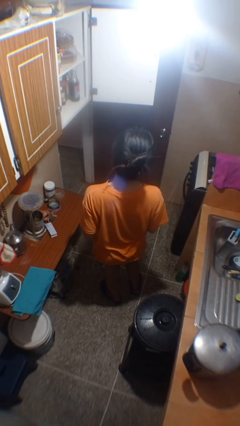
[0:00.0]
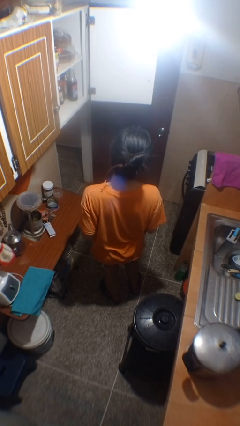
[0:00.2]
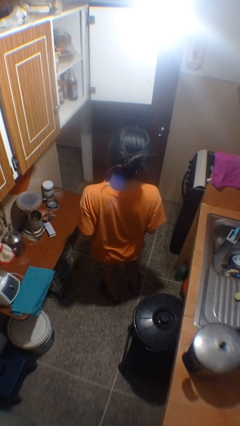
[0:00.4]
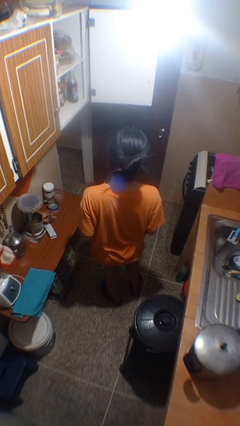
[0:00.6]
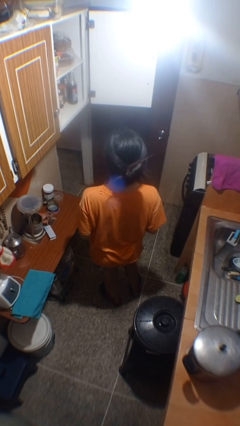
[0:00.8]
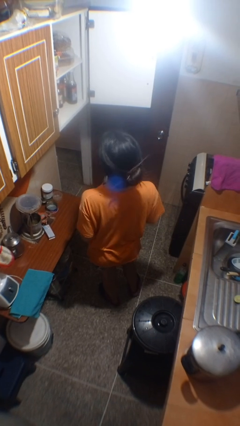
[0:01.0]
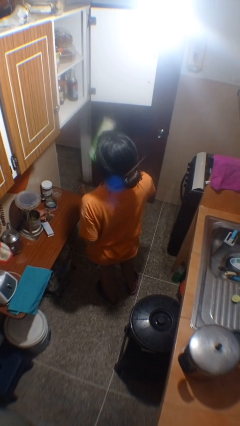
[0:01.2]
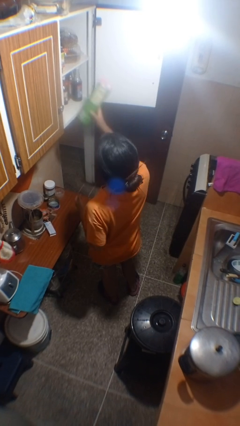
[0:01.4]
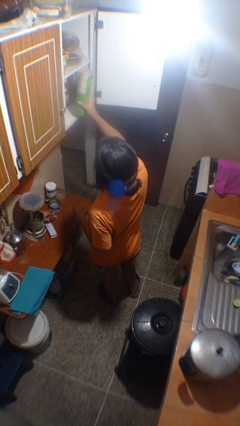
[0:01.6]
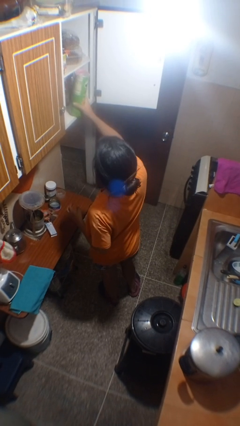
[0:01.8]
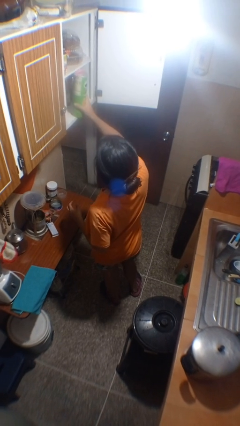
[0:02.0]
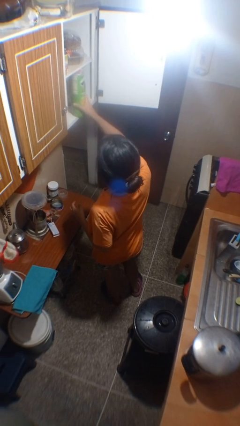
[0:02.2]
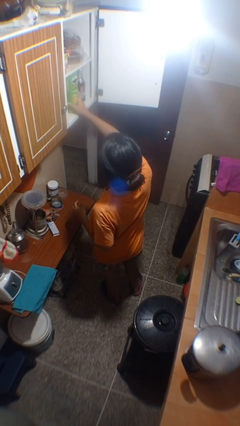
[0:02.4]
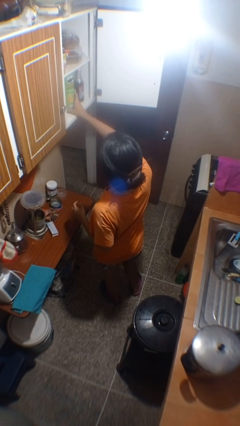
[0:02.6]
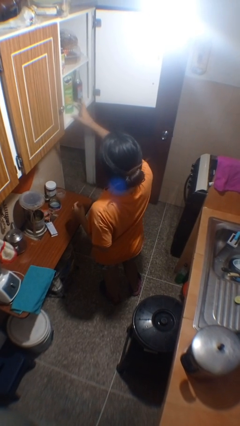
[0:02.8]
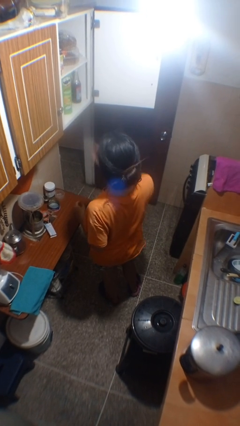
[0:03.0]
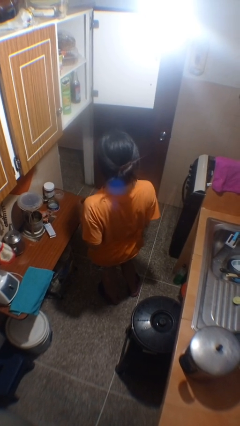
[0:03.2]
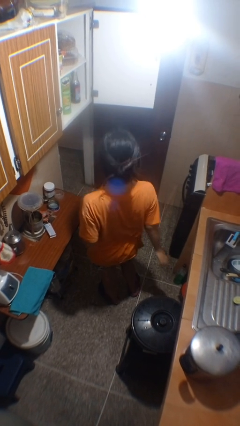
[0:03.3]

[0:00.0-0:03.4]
person puts object in cabinet

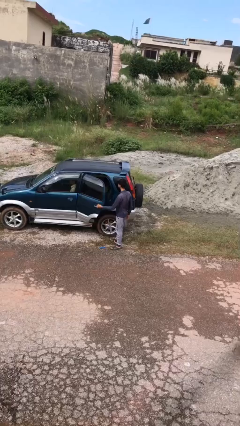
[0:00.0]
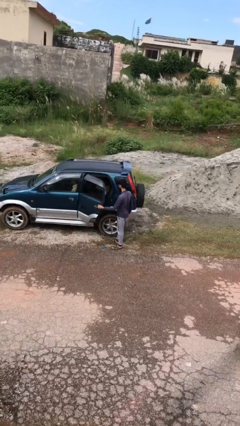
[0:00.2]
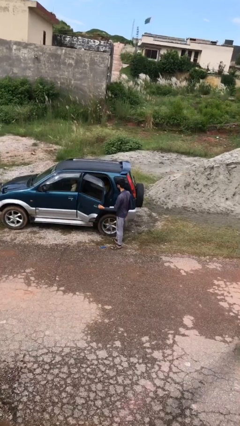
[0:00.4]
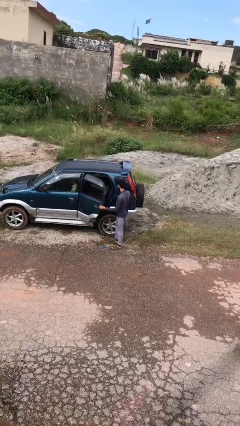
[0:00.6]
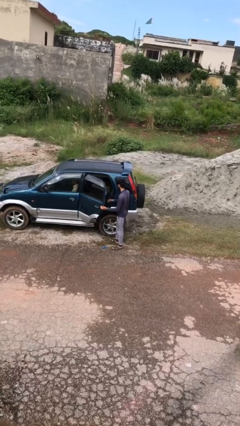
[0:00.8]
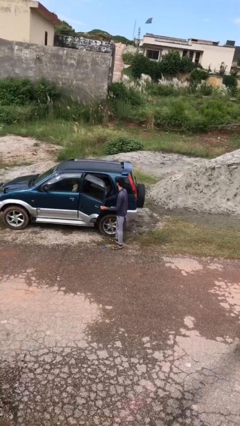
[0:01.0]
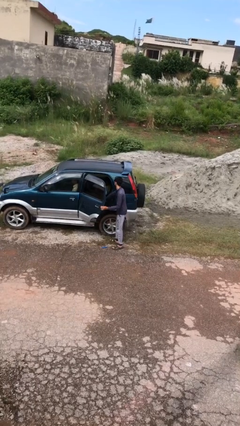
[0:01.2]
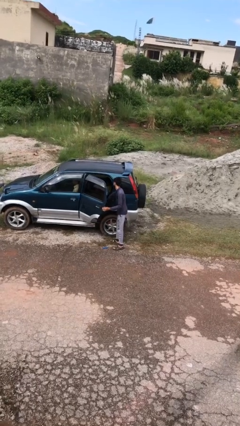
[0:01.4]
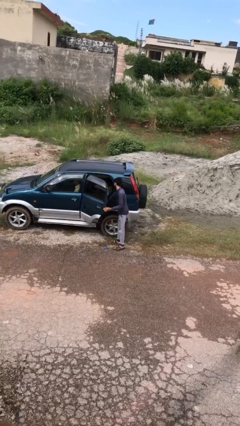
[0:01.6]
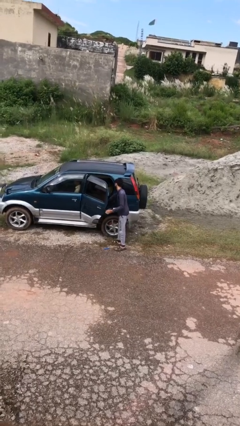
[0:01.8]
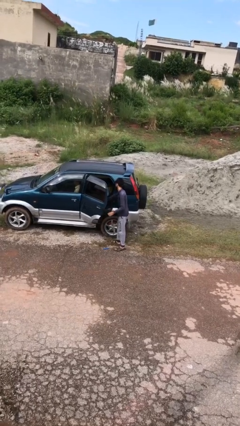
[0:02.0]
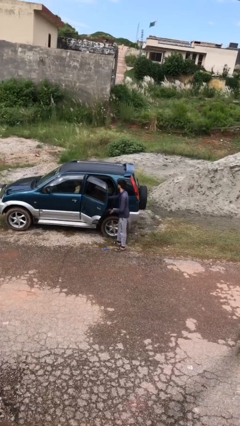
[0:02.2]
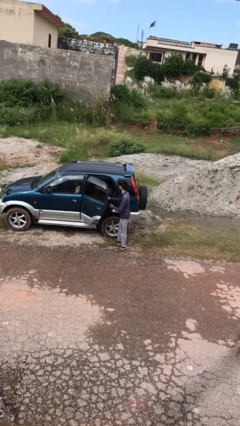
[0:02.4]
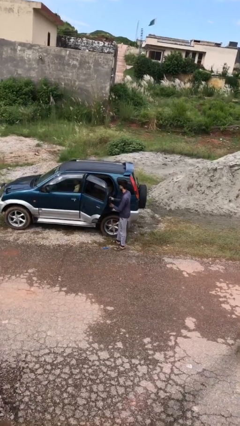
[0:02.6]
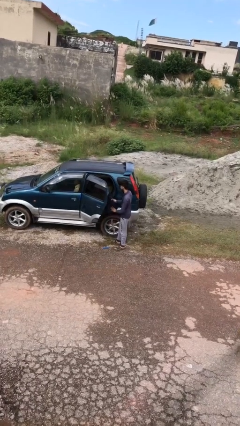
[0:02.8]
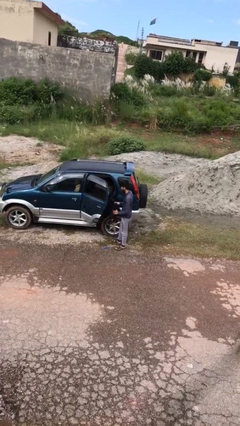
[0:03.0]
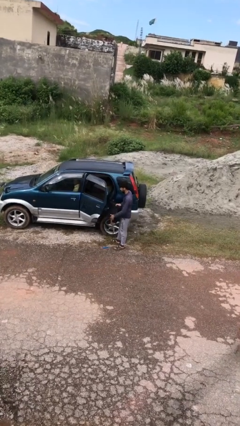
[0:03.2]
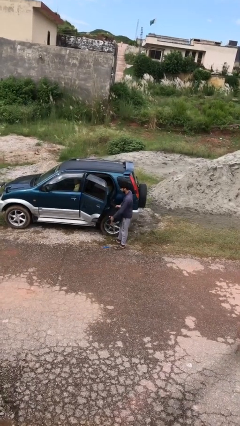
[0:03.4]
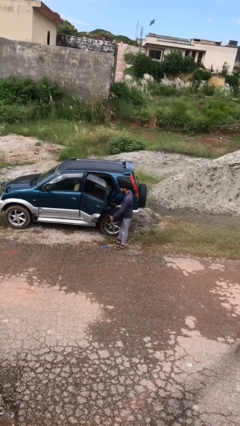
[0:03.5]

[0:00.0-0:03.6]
person unloads car

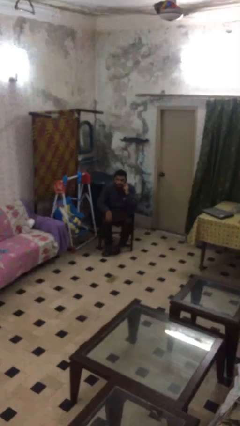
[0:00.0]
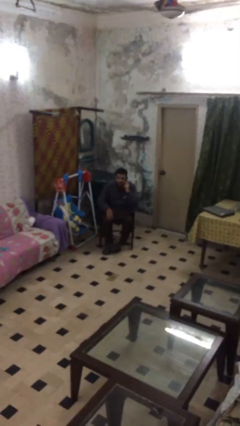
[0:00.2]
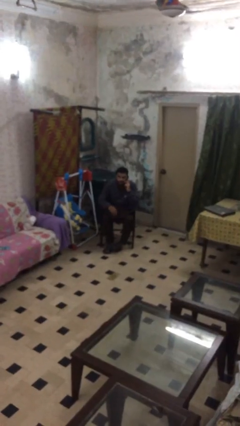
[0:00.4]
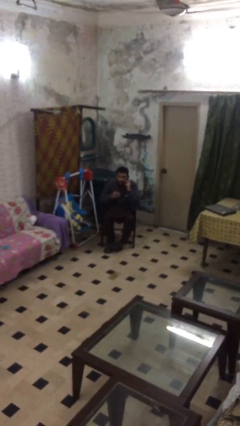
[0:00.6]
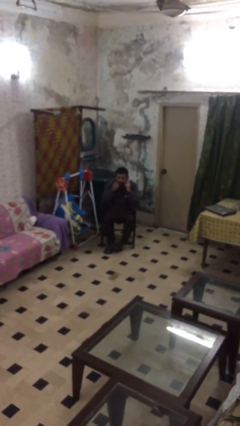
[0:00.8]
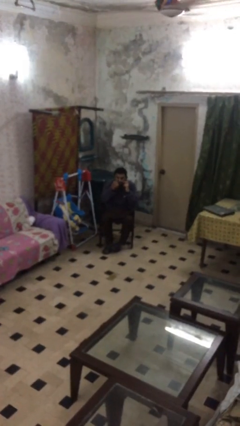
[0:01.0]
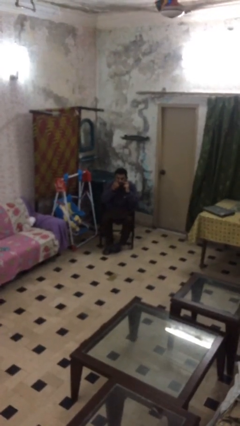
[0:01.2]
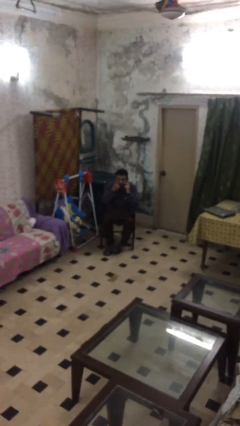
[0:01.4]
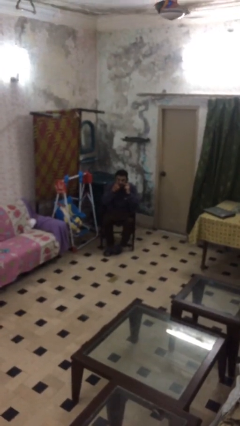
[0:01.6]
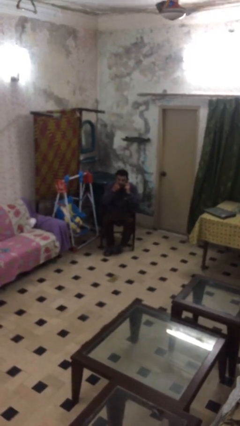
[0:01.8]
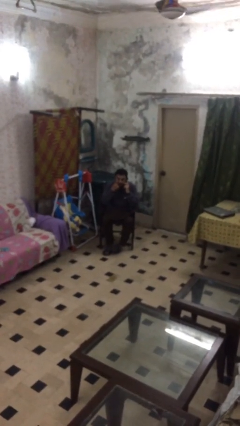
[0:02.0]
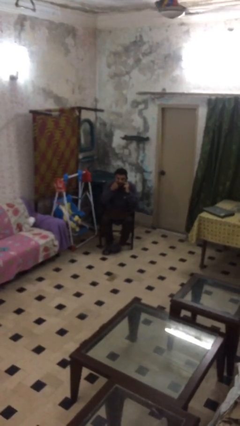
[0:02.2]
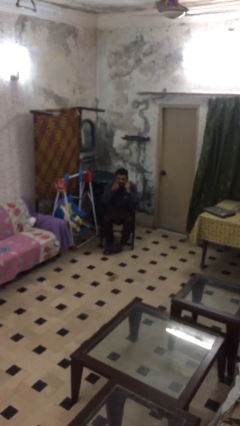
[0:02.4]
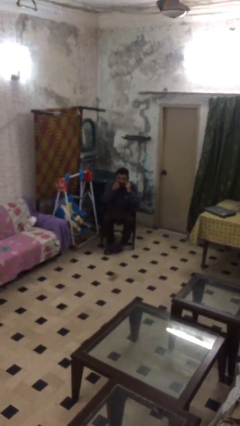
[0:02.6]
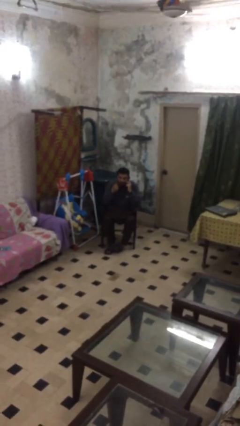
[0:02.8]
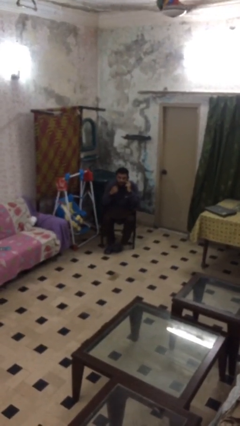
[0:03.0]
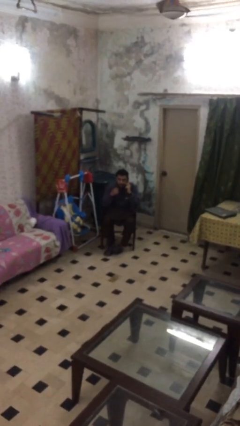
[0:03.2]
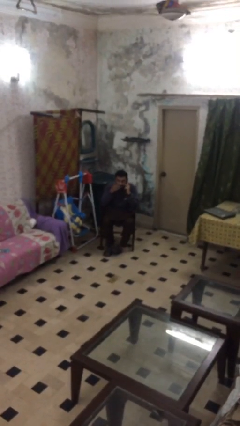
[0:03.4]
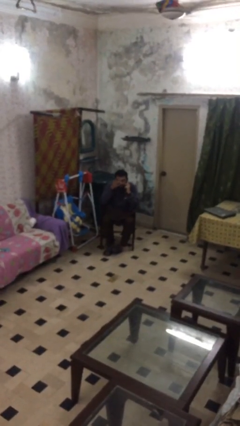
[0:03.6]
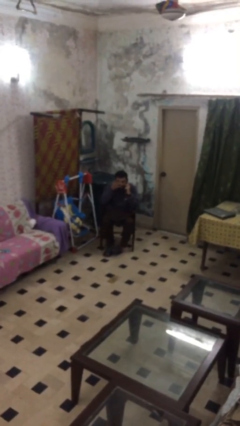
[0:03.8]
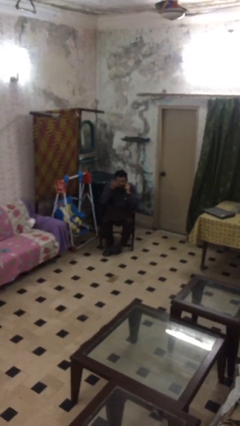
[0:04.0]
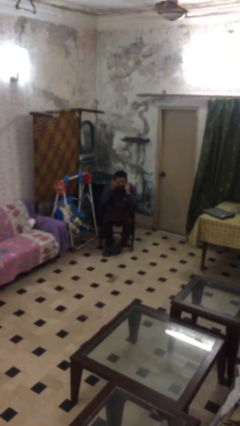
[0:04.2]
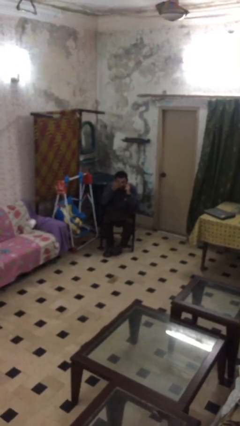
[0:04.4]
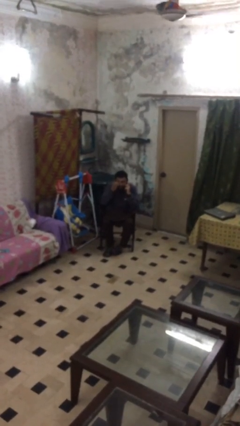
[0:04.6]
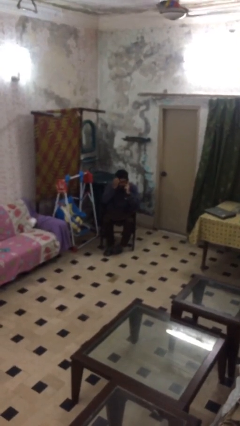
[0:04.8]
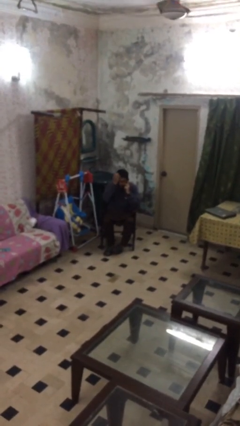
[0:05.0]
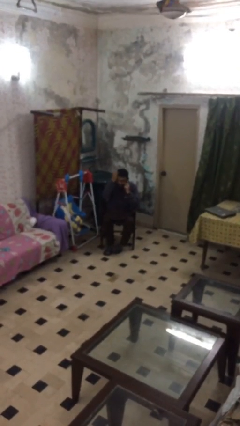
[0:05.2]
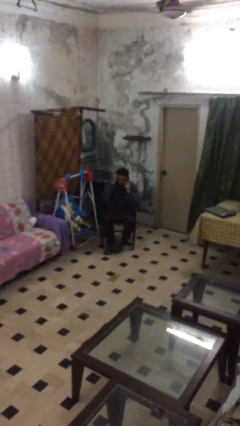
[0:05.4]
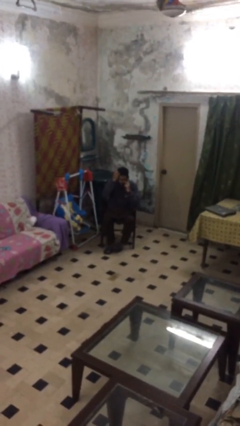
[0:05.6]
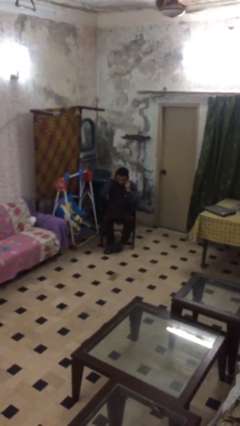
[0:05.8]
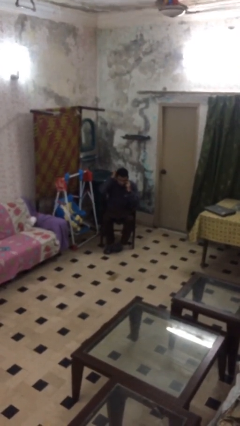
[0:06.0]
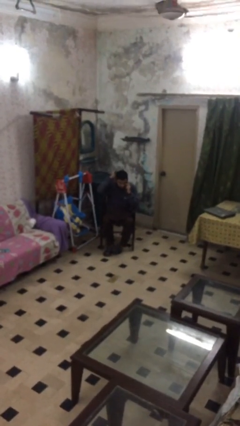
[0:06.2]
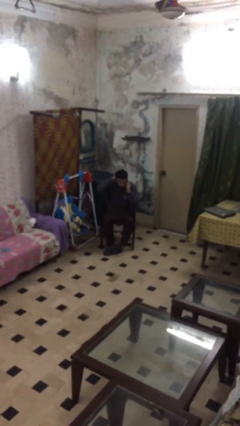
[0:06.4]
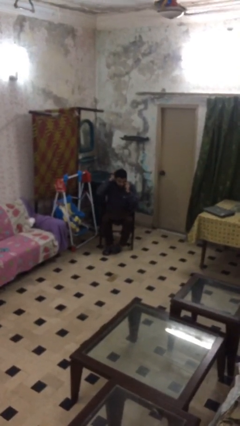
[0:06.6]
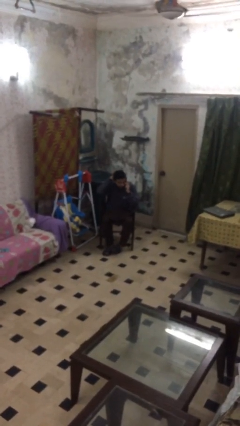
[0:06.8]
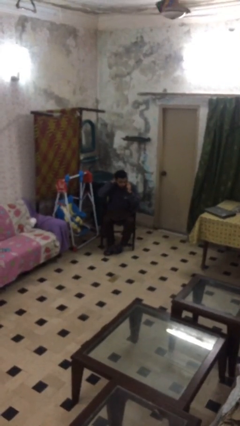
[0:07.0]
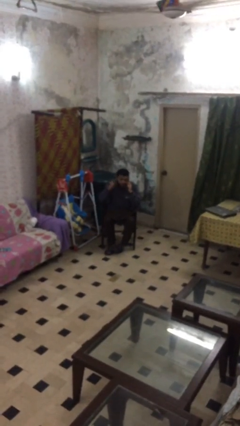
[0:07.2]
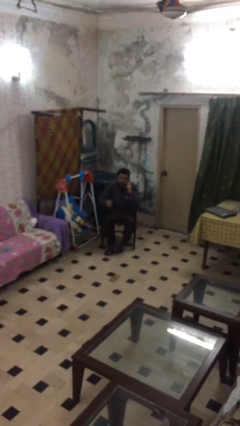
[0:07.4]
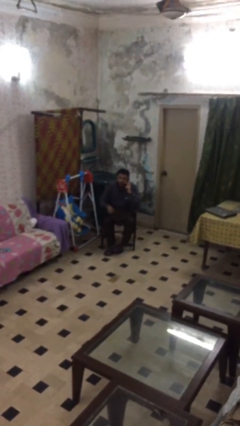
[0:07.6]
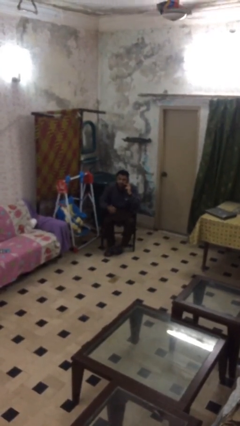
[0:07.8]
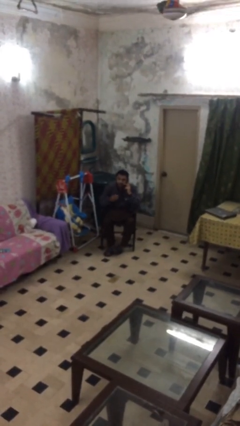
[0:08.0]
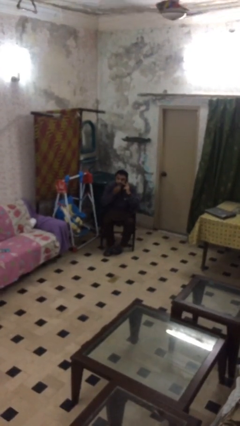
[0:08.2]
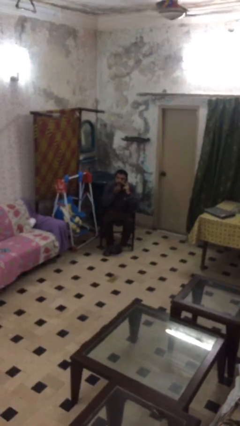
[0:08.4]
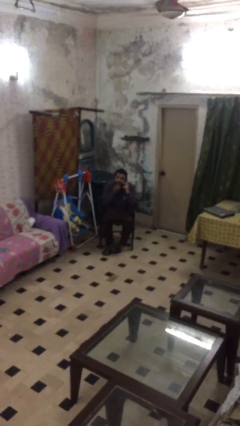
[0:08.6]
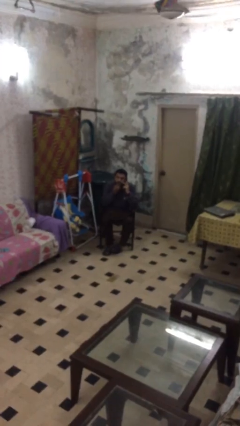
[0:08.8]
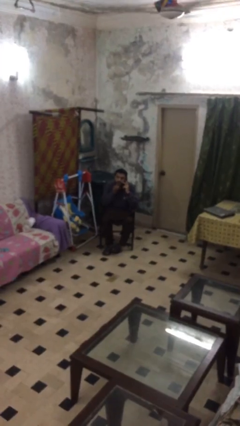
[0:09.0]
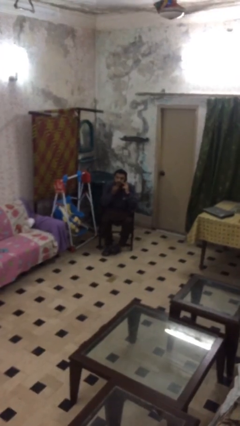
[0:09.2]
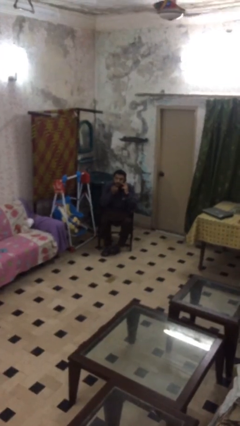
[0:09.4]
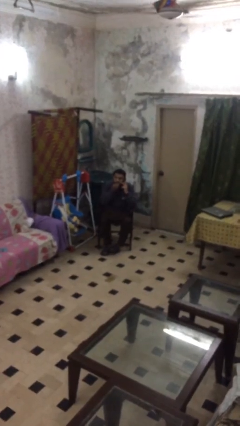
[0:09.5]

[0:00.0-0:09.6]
person talks on phone

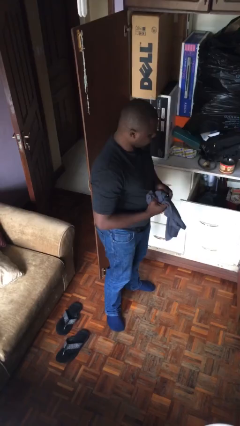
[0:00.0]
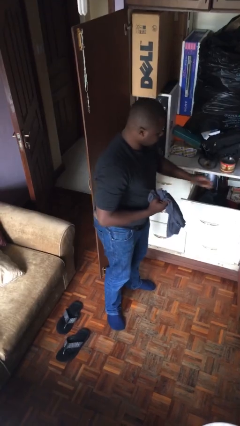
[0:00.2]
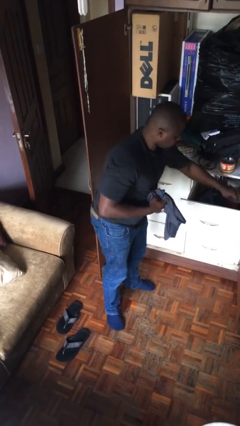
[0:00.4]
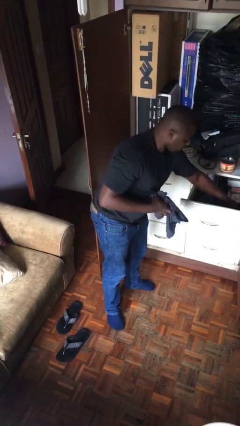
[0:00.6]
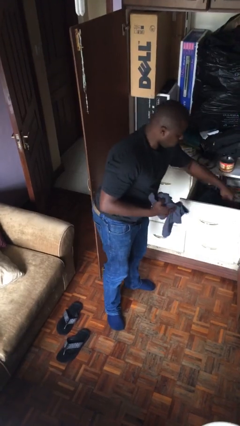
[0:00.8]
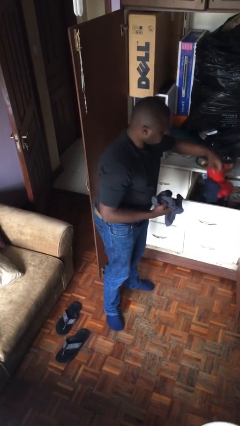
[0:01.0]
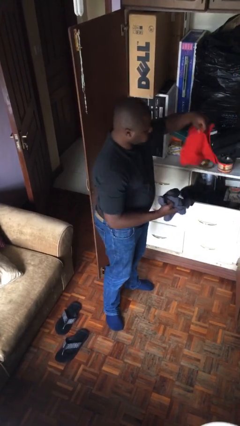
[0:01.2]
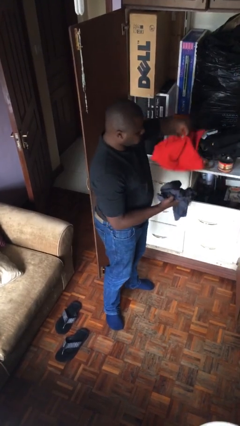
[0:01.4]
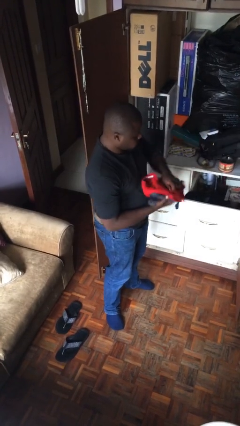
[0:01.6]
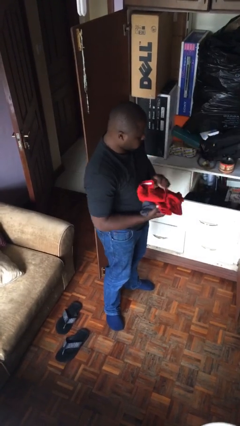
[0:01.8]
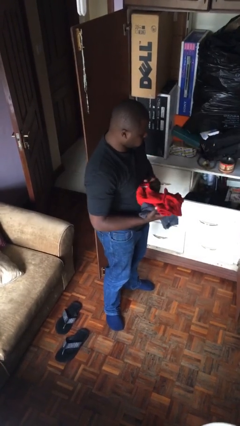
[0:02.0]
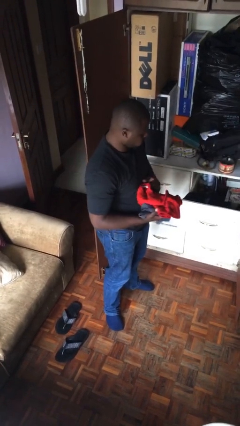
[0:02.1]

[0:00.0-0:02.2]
person takes clothes from dresser
